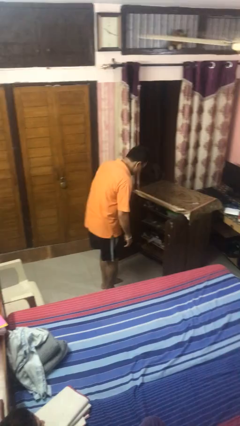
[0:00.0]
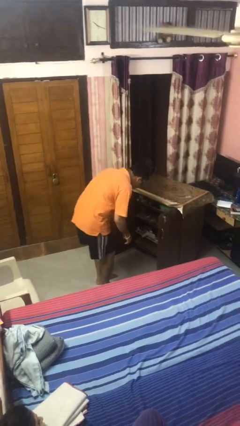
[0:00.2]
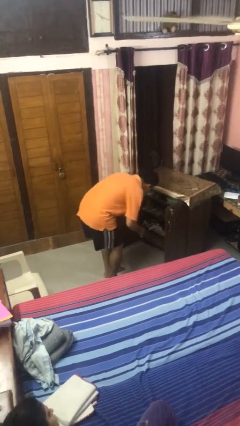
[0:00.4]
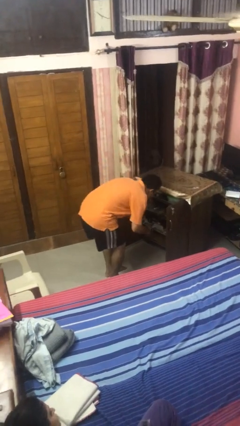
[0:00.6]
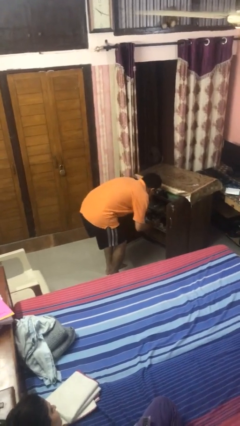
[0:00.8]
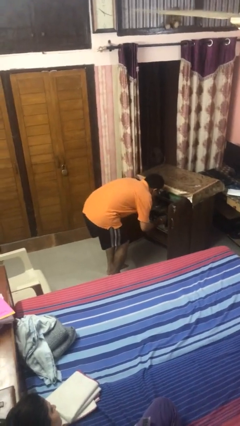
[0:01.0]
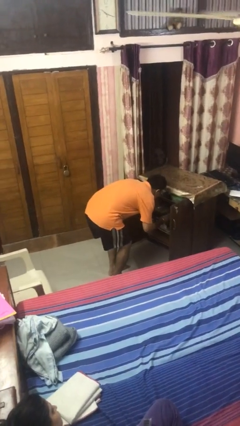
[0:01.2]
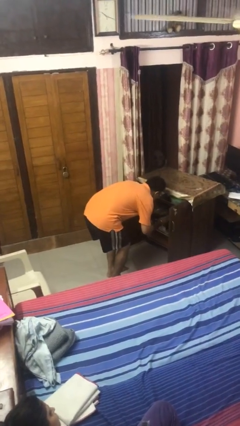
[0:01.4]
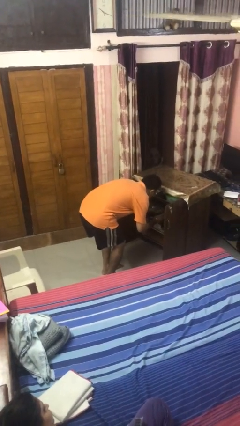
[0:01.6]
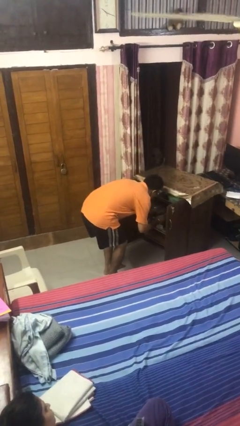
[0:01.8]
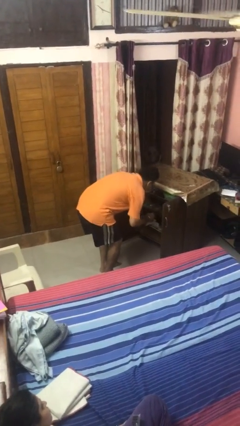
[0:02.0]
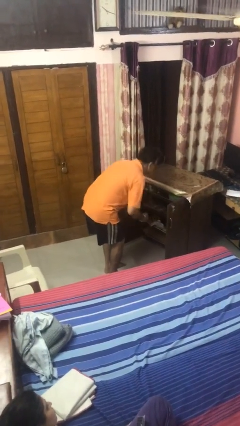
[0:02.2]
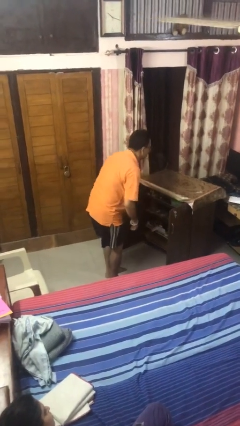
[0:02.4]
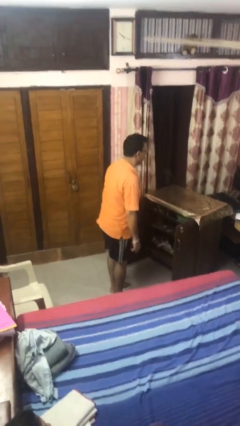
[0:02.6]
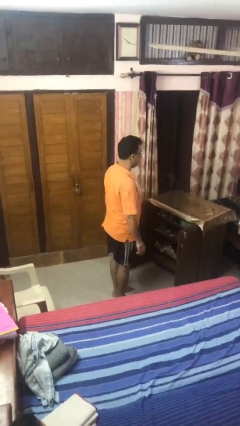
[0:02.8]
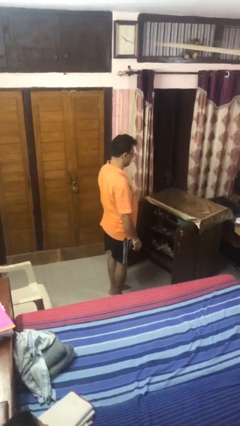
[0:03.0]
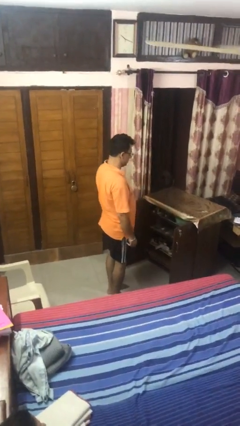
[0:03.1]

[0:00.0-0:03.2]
person searches in cabinet

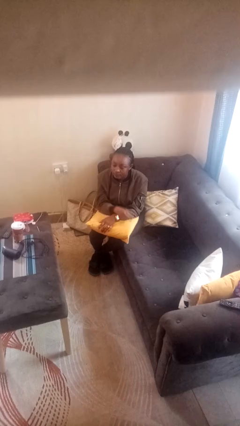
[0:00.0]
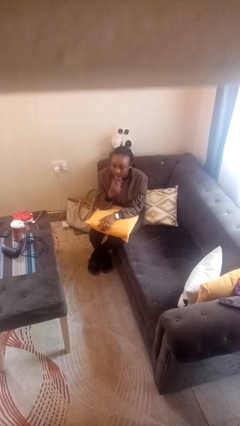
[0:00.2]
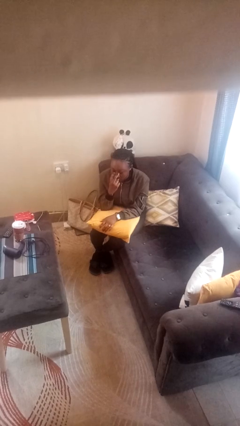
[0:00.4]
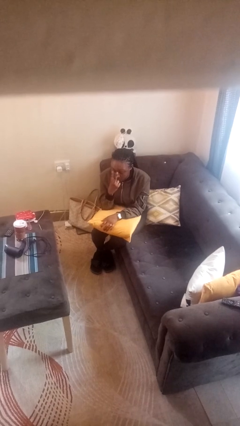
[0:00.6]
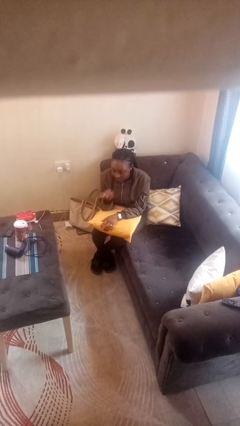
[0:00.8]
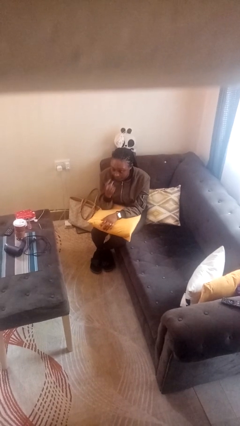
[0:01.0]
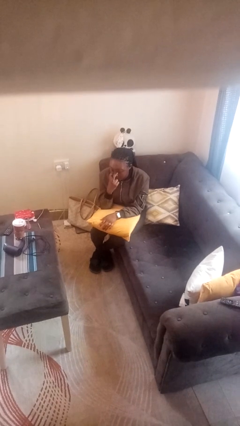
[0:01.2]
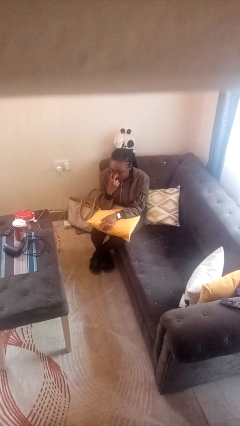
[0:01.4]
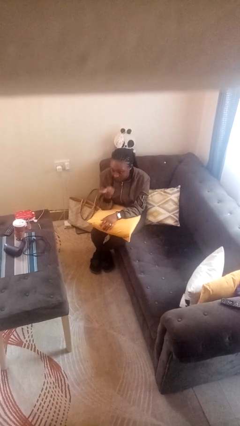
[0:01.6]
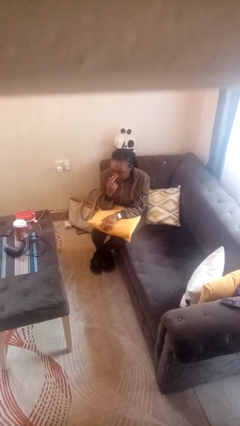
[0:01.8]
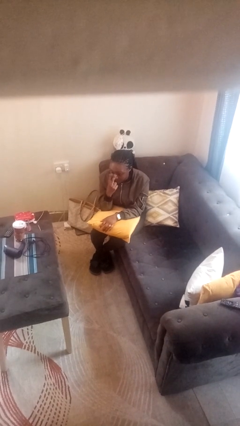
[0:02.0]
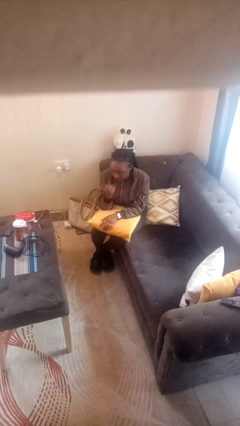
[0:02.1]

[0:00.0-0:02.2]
person gestures watch closely

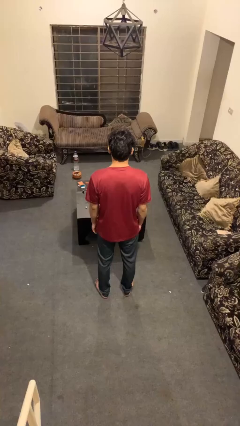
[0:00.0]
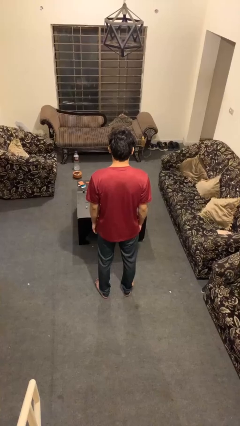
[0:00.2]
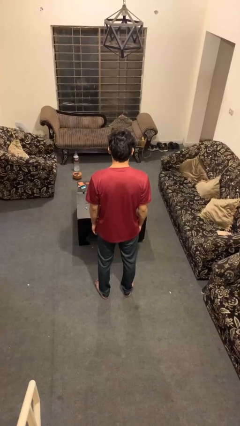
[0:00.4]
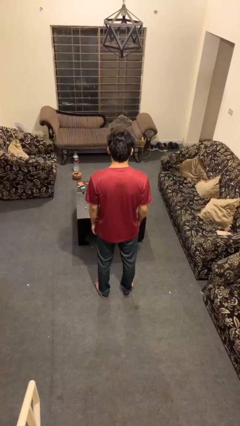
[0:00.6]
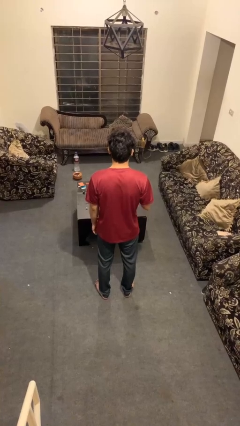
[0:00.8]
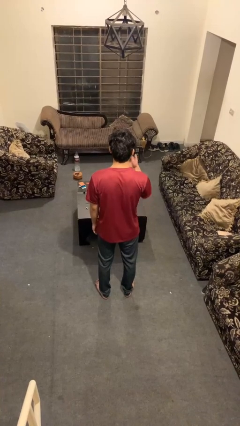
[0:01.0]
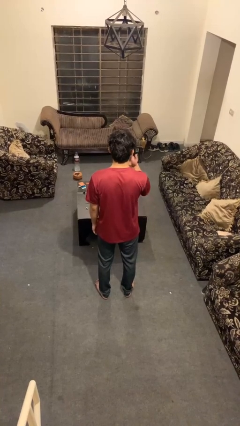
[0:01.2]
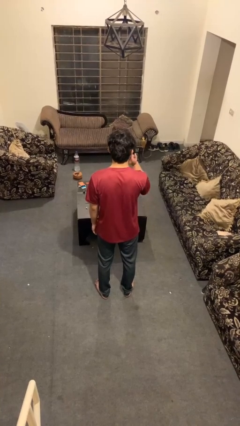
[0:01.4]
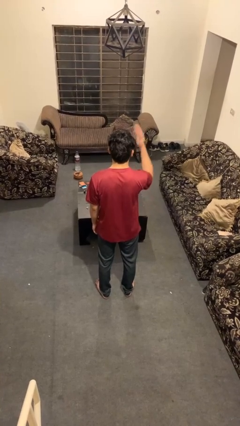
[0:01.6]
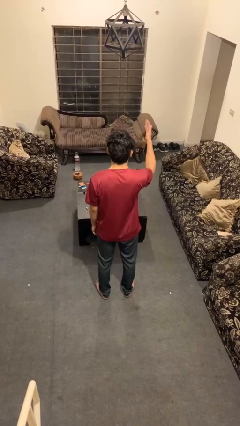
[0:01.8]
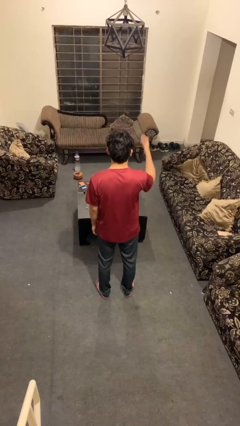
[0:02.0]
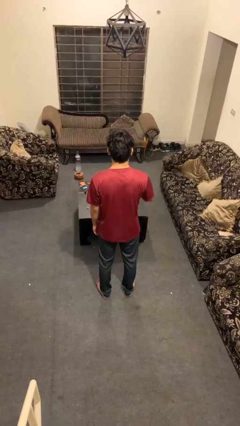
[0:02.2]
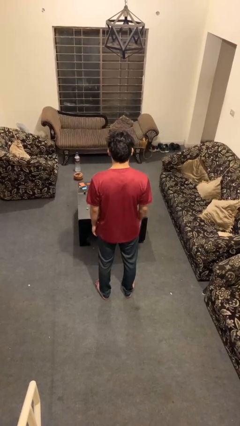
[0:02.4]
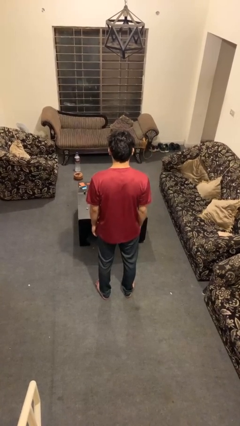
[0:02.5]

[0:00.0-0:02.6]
person gestures blow kiss

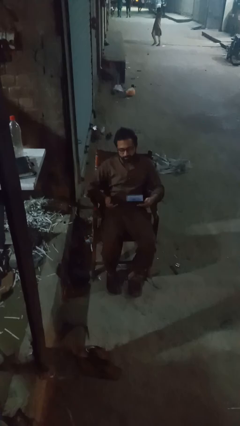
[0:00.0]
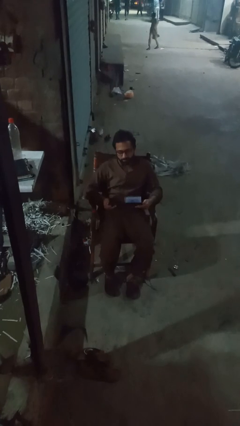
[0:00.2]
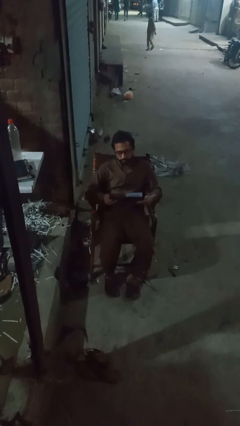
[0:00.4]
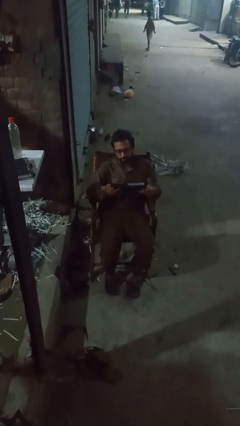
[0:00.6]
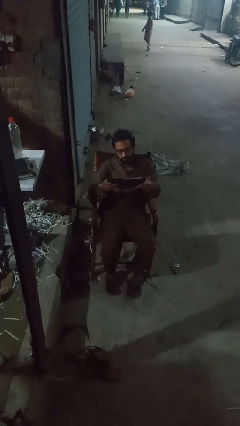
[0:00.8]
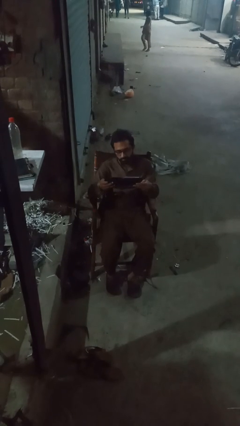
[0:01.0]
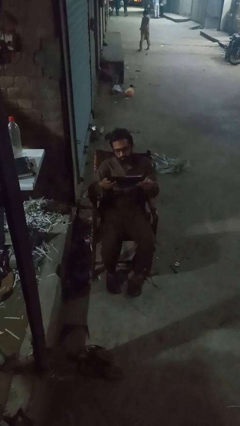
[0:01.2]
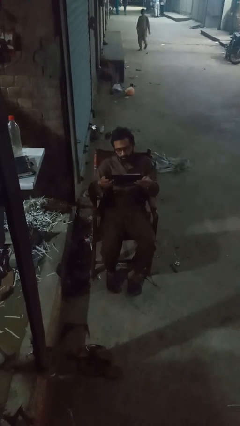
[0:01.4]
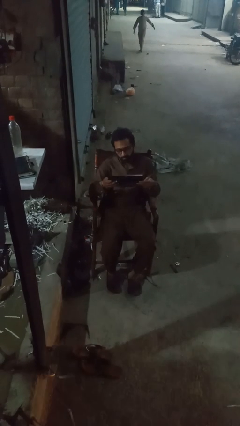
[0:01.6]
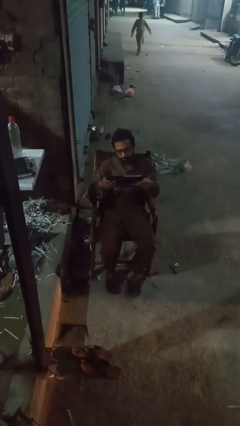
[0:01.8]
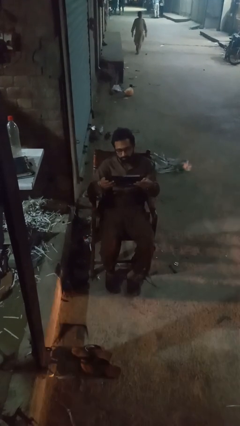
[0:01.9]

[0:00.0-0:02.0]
person interacts with handheld game

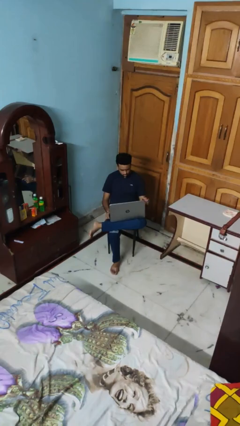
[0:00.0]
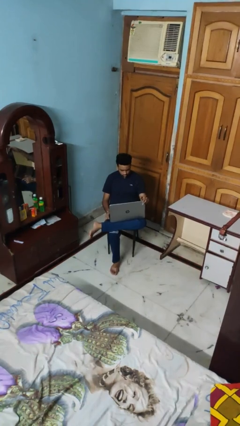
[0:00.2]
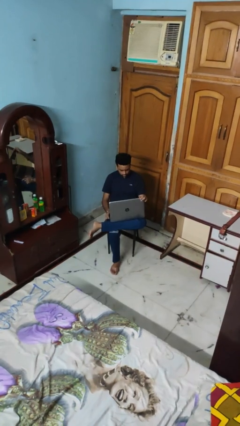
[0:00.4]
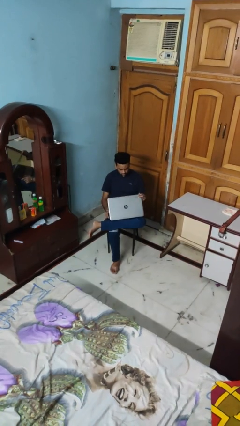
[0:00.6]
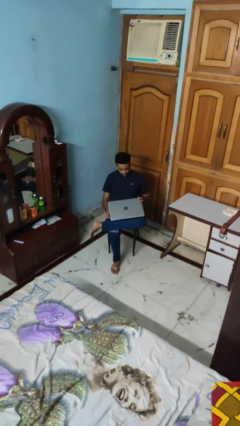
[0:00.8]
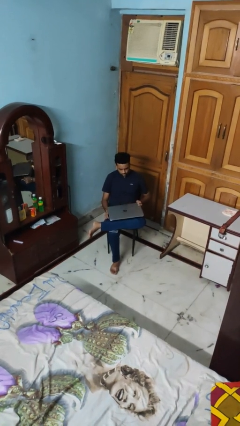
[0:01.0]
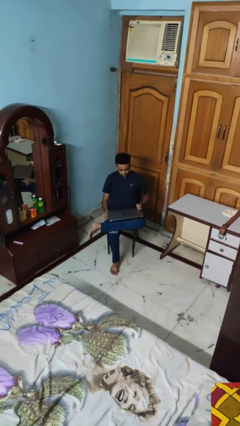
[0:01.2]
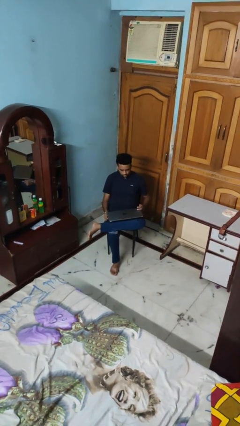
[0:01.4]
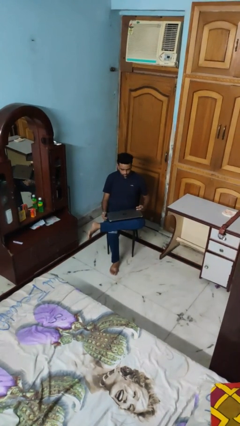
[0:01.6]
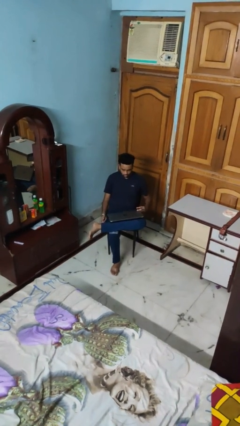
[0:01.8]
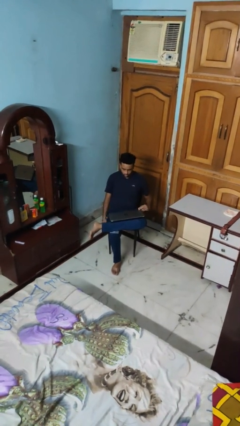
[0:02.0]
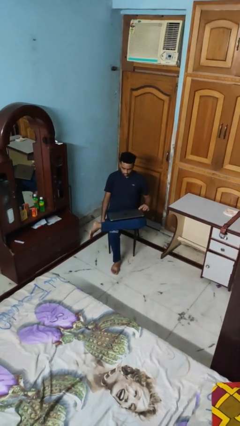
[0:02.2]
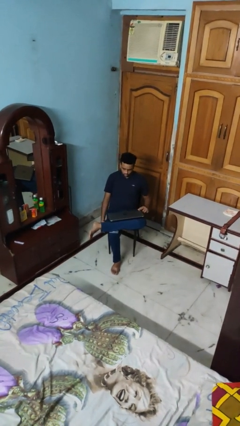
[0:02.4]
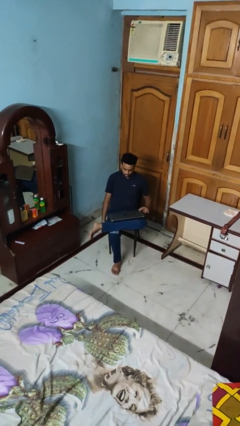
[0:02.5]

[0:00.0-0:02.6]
person closes laptop

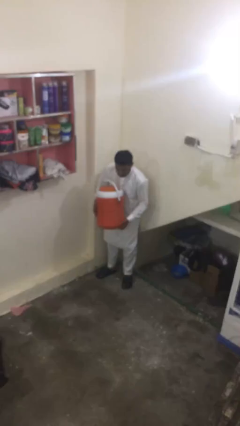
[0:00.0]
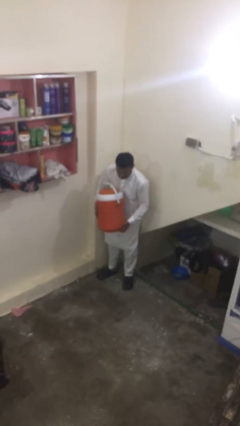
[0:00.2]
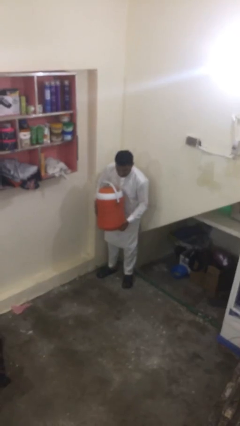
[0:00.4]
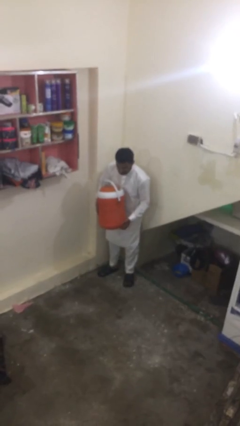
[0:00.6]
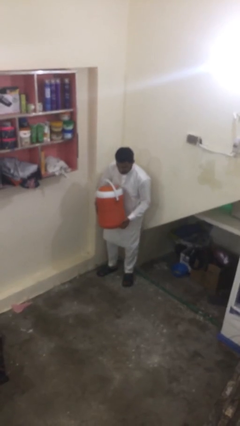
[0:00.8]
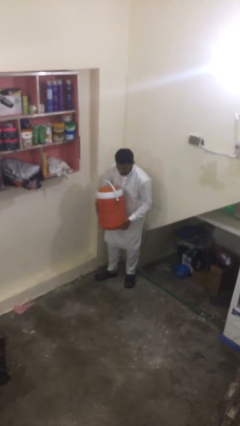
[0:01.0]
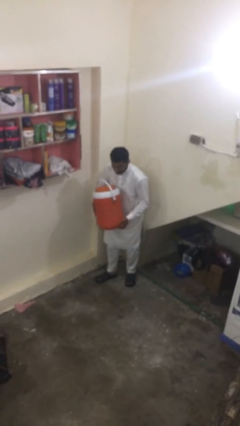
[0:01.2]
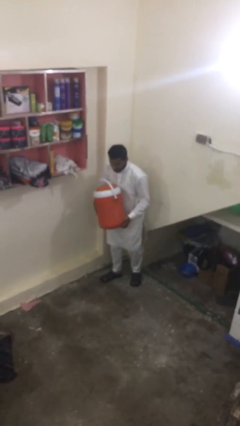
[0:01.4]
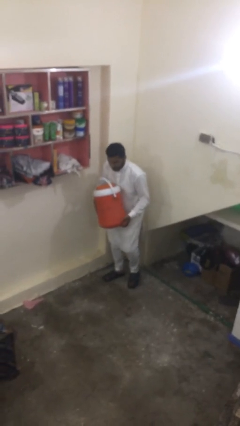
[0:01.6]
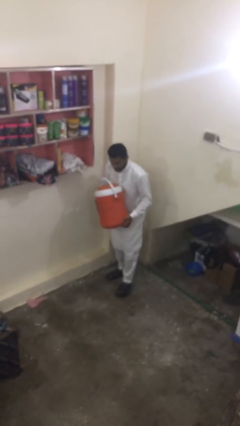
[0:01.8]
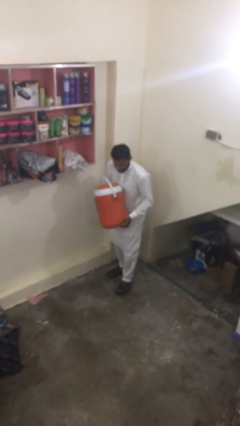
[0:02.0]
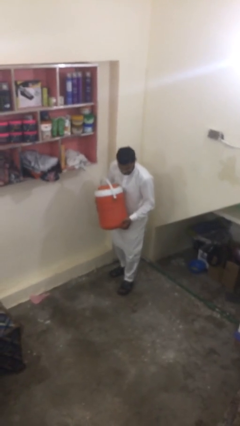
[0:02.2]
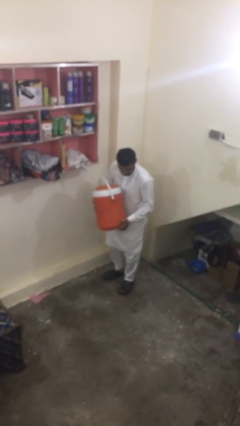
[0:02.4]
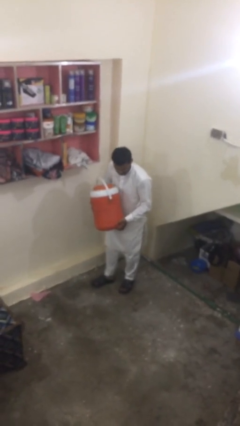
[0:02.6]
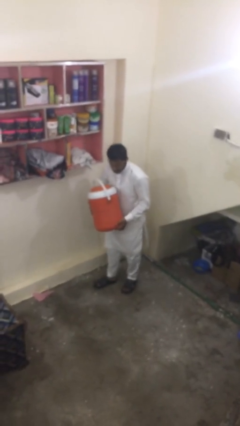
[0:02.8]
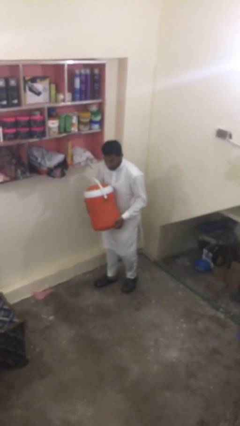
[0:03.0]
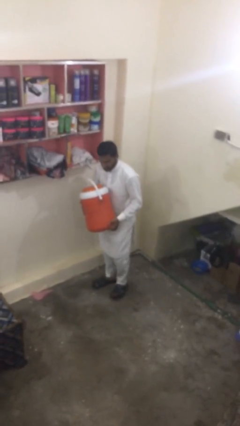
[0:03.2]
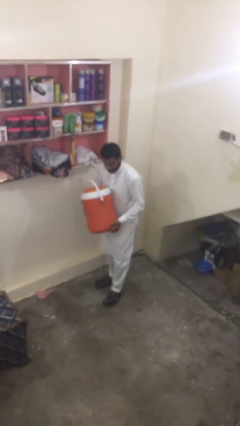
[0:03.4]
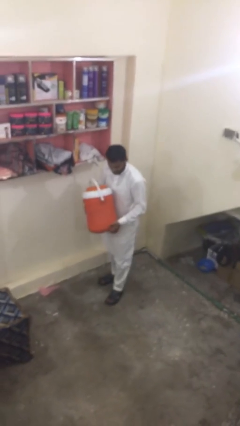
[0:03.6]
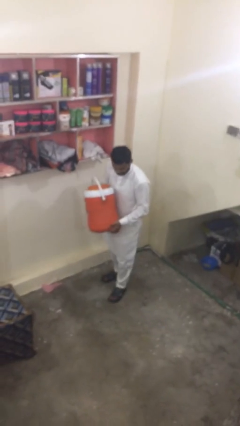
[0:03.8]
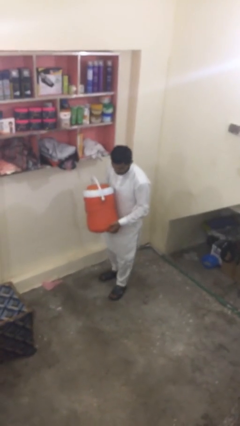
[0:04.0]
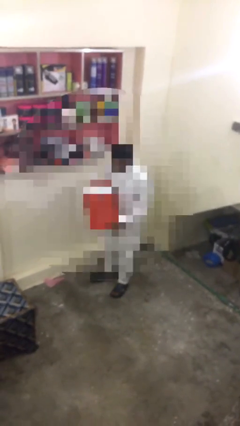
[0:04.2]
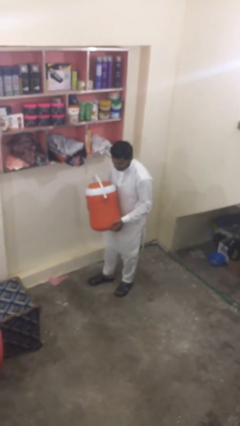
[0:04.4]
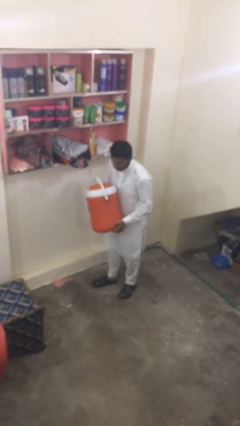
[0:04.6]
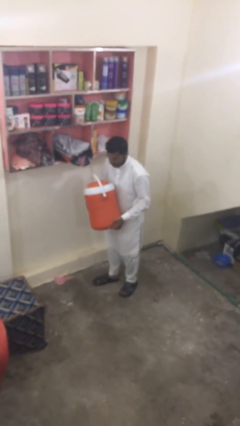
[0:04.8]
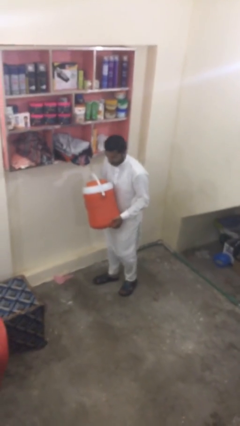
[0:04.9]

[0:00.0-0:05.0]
person carries heavy object
